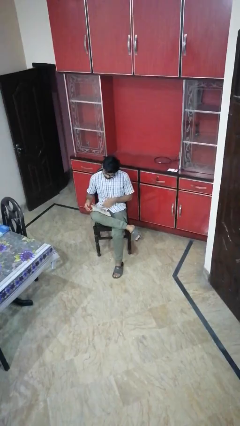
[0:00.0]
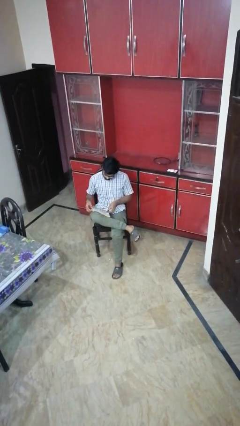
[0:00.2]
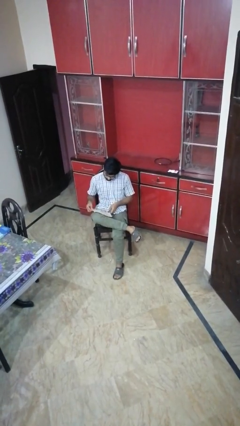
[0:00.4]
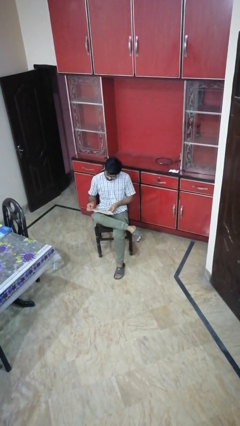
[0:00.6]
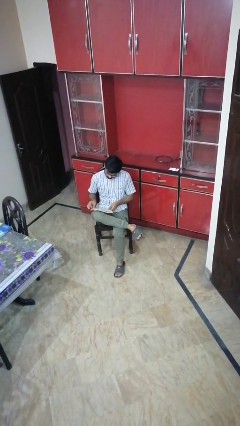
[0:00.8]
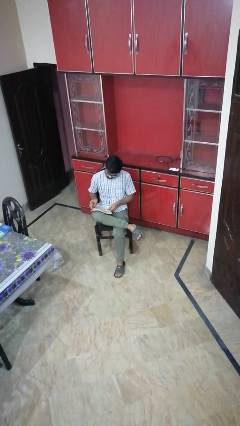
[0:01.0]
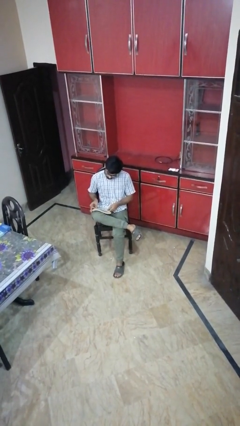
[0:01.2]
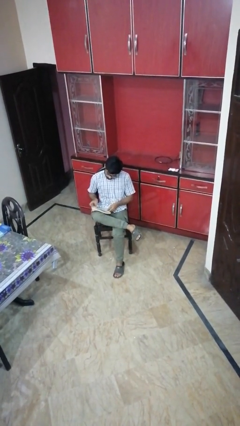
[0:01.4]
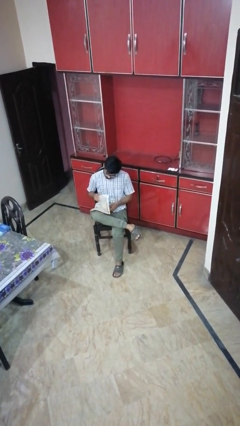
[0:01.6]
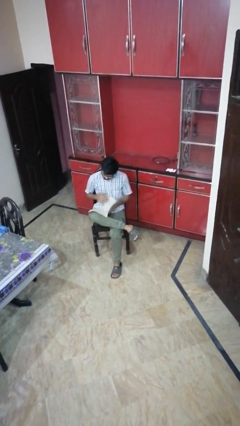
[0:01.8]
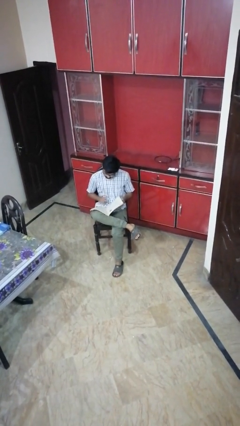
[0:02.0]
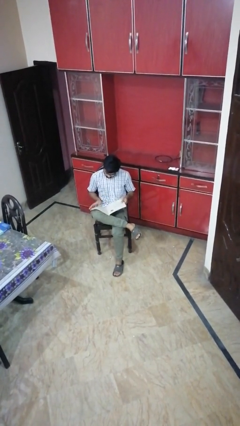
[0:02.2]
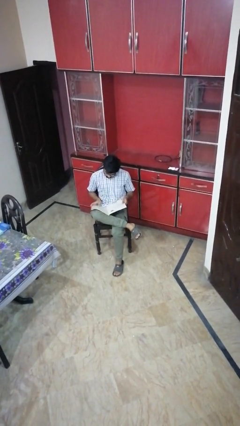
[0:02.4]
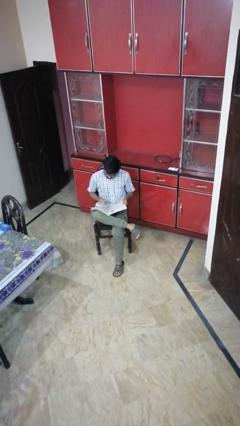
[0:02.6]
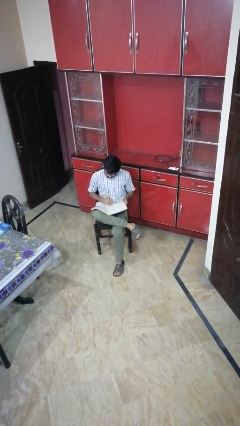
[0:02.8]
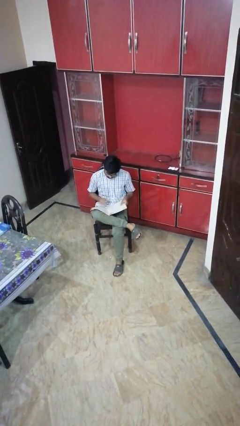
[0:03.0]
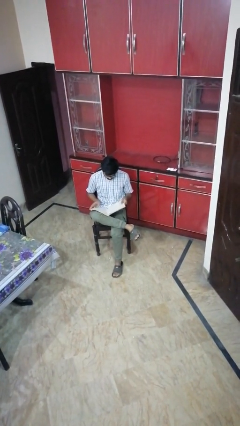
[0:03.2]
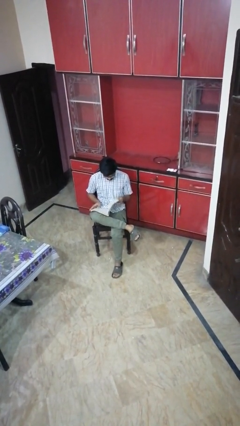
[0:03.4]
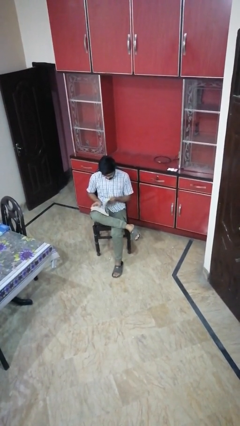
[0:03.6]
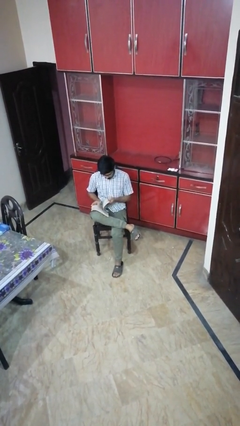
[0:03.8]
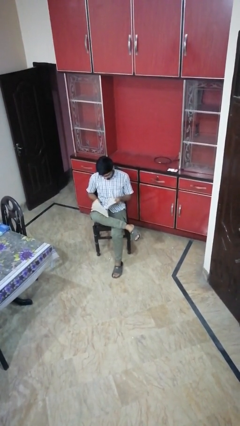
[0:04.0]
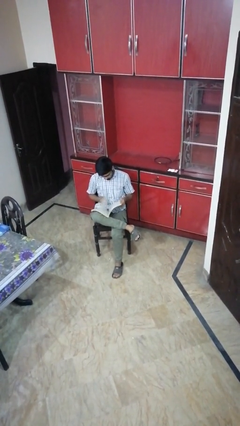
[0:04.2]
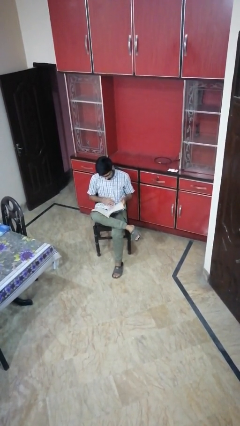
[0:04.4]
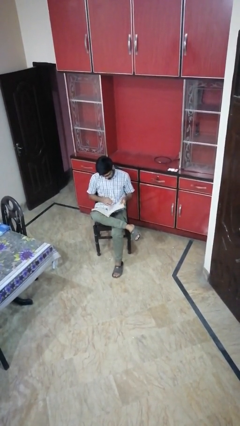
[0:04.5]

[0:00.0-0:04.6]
person exercises with situp

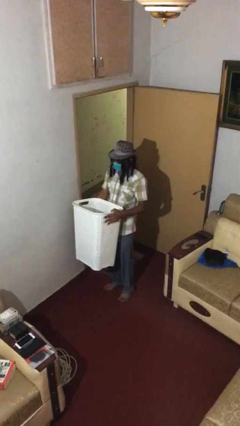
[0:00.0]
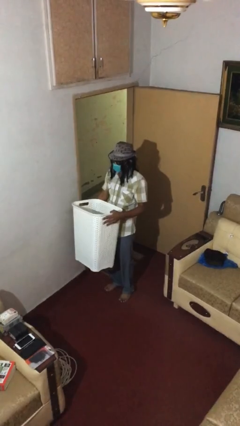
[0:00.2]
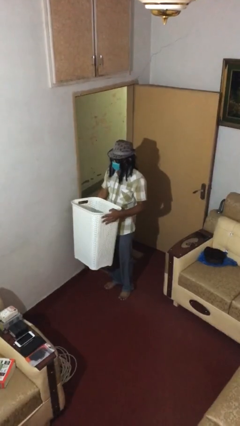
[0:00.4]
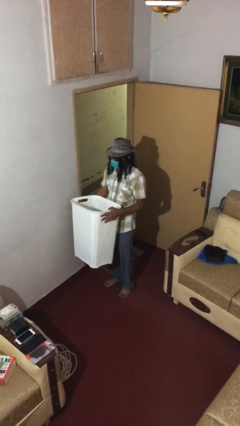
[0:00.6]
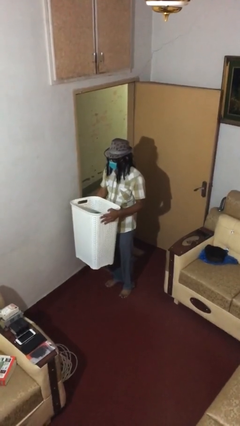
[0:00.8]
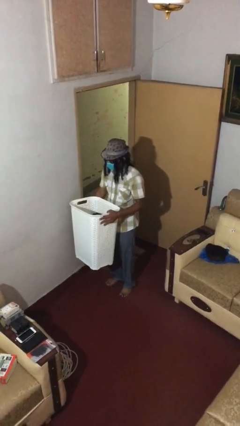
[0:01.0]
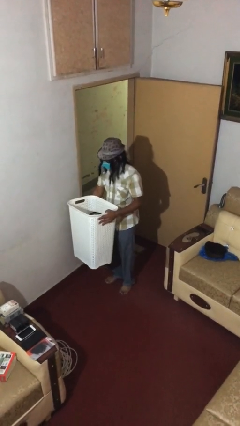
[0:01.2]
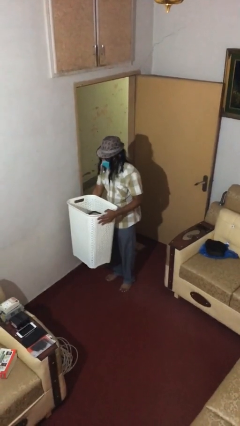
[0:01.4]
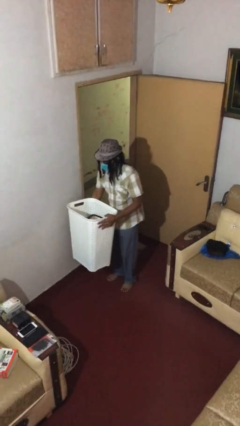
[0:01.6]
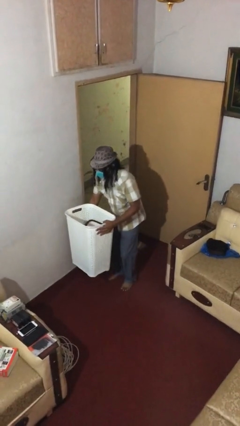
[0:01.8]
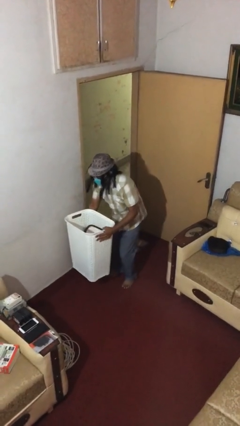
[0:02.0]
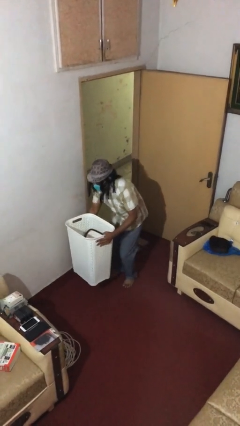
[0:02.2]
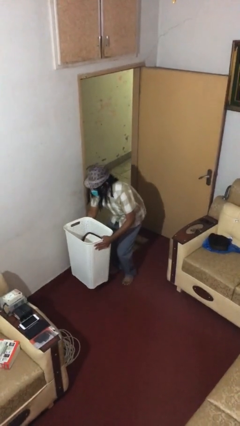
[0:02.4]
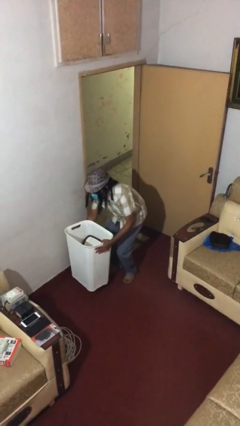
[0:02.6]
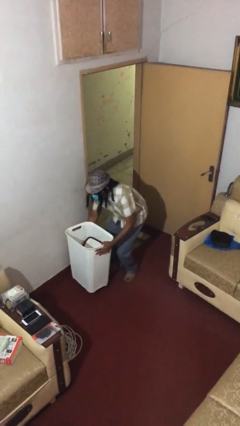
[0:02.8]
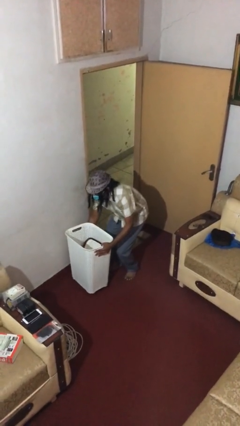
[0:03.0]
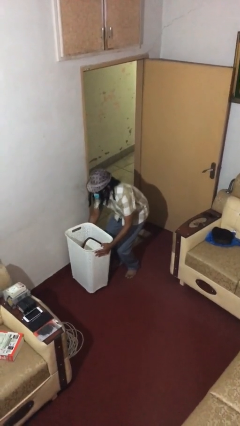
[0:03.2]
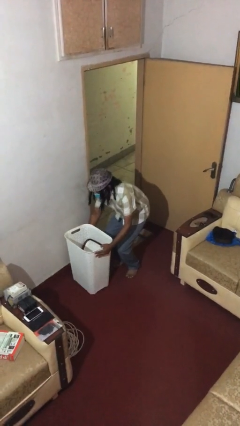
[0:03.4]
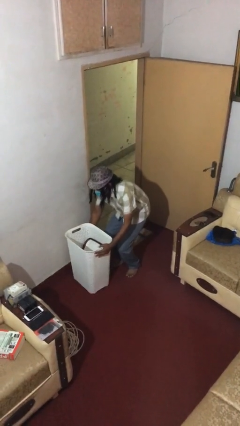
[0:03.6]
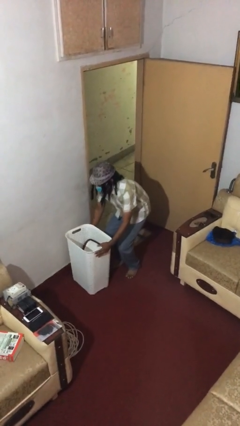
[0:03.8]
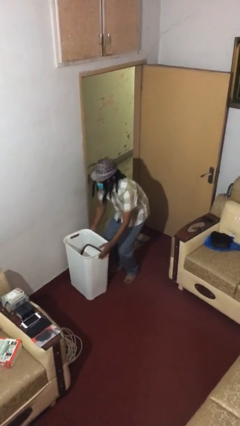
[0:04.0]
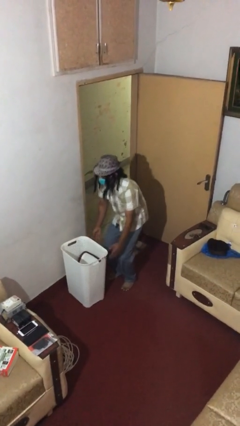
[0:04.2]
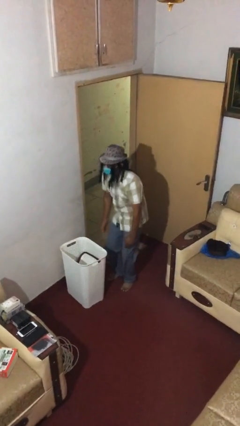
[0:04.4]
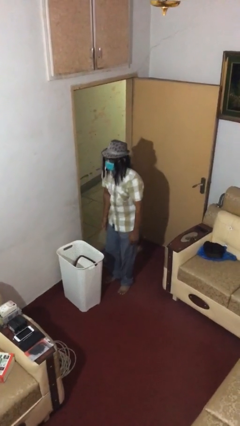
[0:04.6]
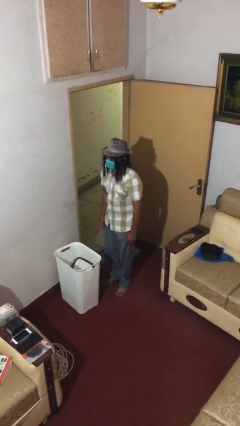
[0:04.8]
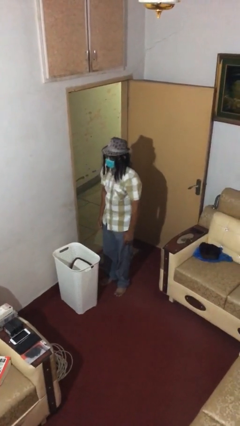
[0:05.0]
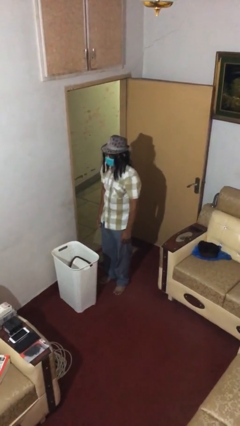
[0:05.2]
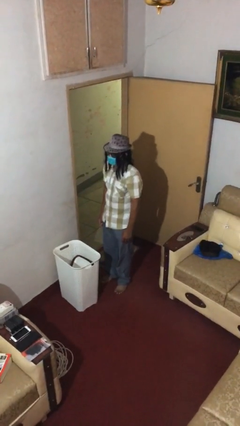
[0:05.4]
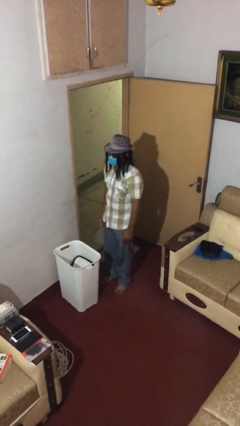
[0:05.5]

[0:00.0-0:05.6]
person puts down object on floor

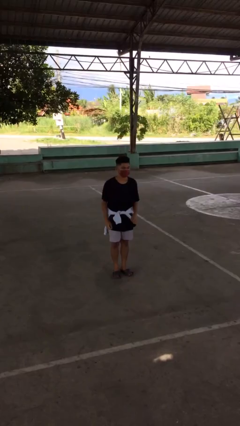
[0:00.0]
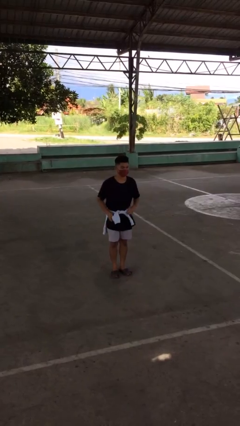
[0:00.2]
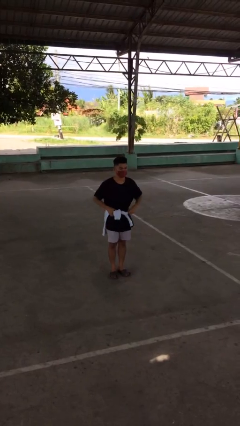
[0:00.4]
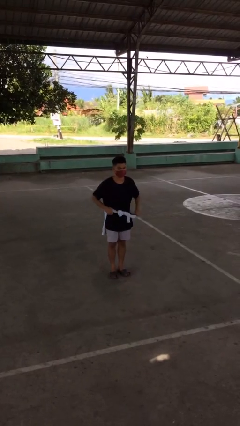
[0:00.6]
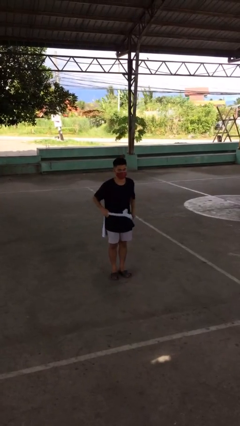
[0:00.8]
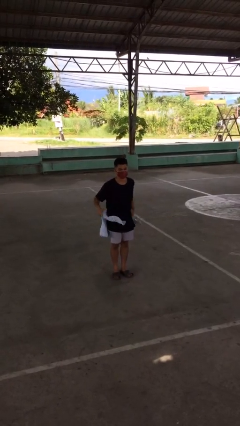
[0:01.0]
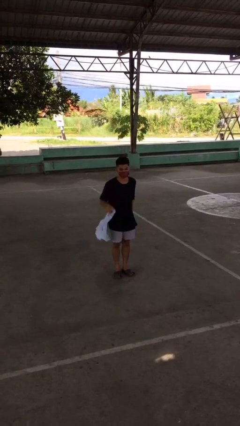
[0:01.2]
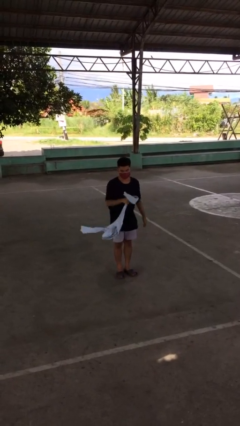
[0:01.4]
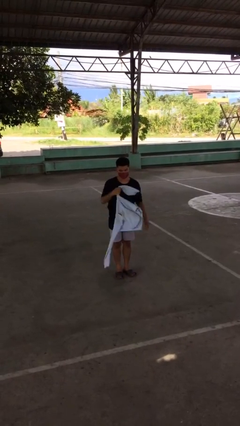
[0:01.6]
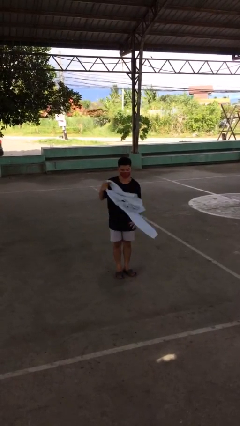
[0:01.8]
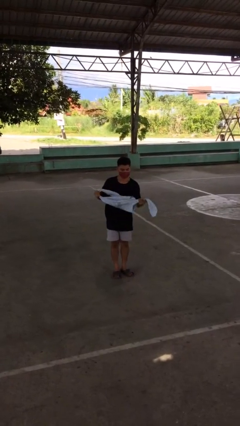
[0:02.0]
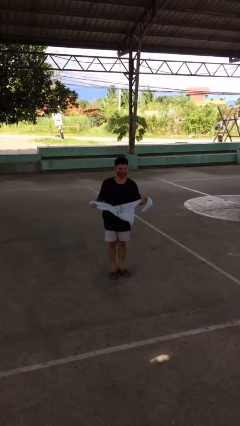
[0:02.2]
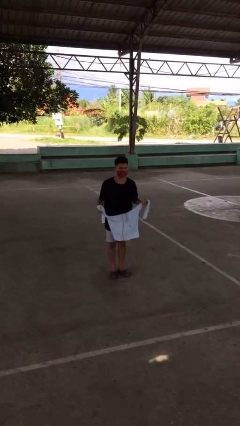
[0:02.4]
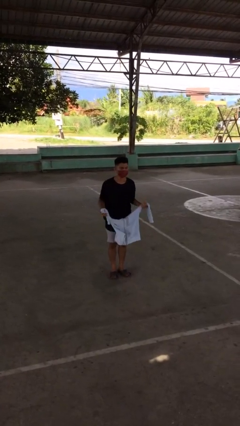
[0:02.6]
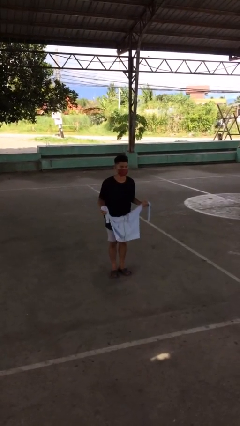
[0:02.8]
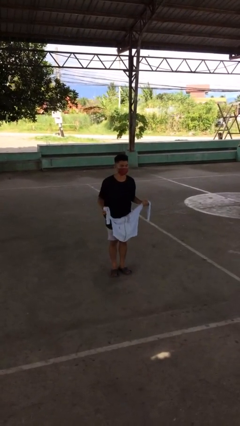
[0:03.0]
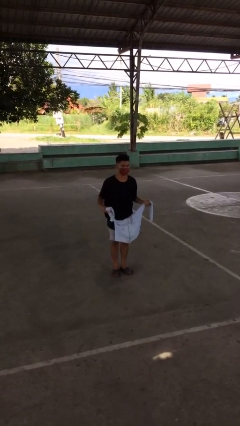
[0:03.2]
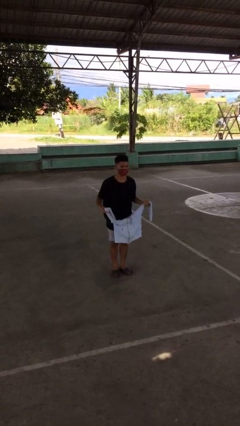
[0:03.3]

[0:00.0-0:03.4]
person unties jacket around waist

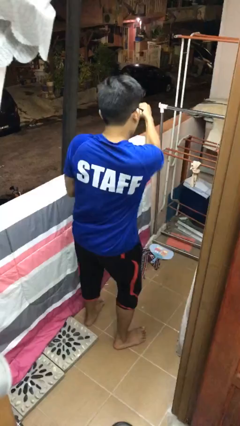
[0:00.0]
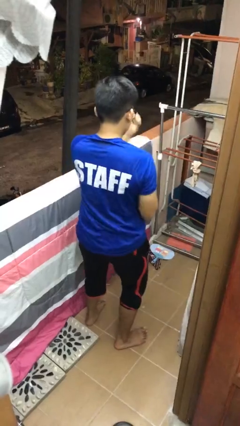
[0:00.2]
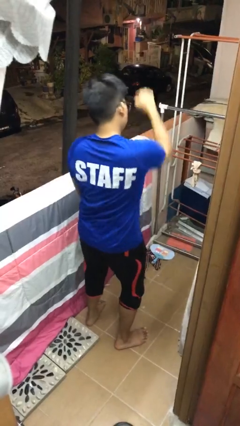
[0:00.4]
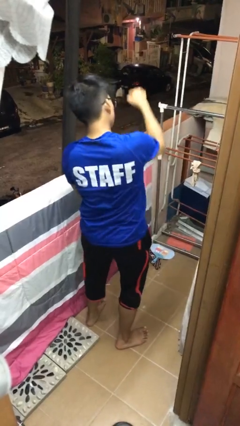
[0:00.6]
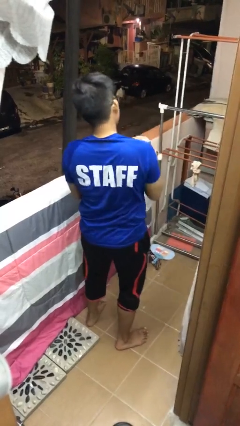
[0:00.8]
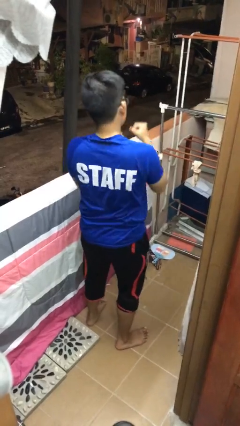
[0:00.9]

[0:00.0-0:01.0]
person punches

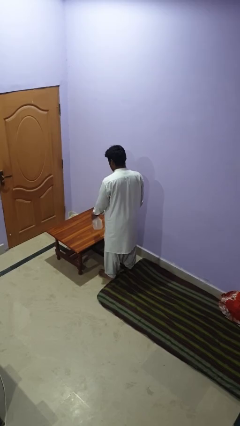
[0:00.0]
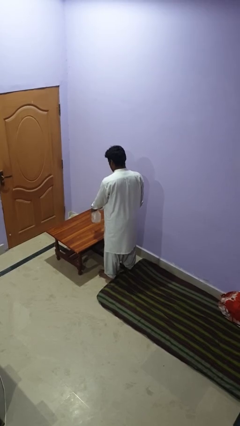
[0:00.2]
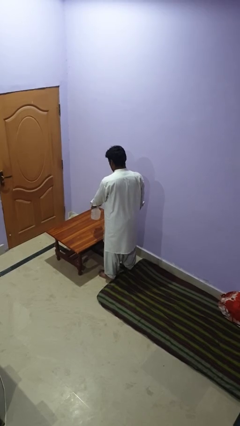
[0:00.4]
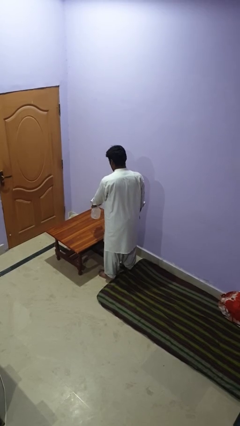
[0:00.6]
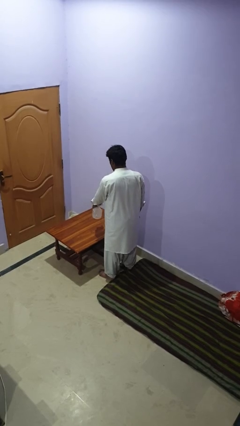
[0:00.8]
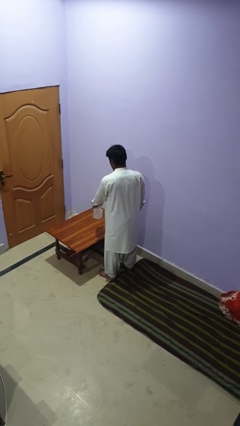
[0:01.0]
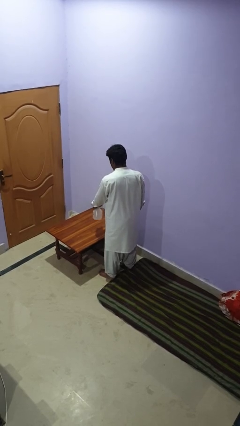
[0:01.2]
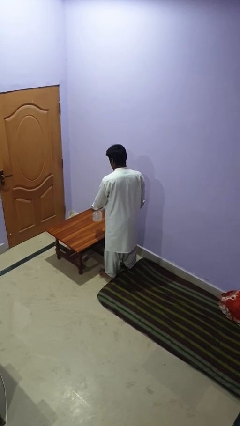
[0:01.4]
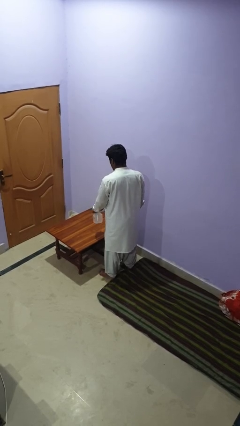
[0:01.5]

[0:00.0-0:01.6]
person sprays from bottle

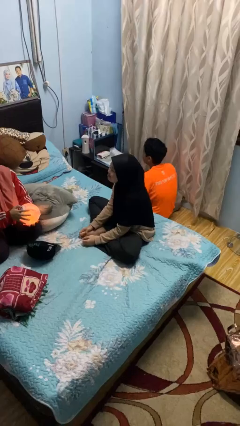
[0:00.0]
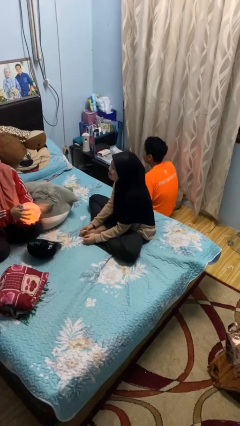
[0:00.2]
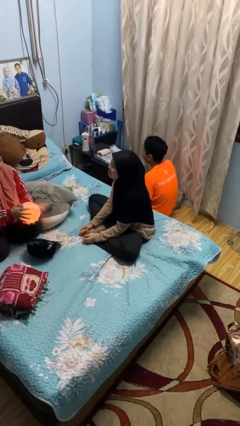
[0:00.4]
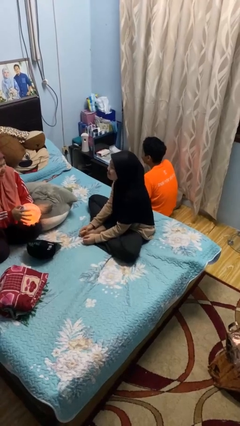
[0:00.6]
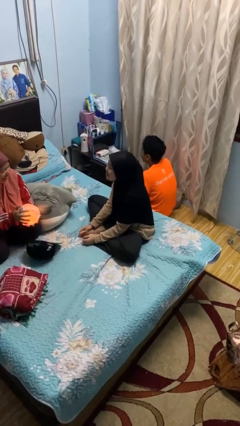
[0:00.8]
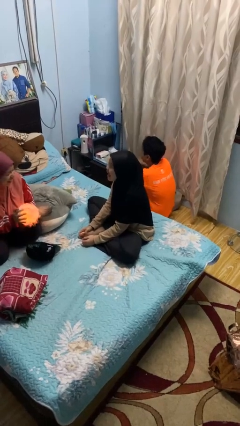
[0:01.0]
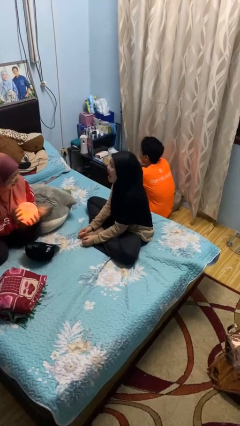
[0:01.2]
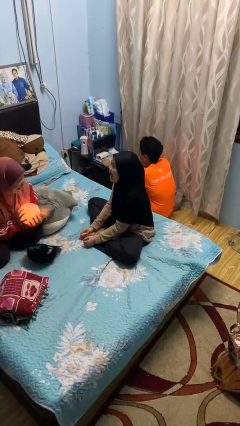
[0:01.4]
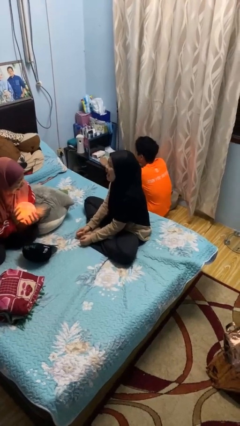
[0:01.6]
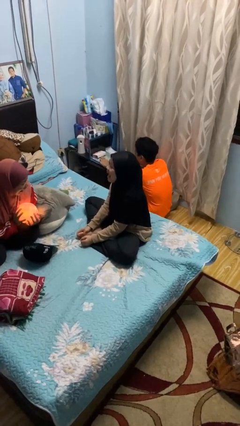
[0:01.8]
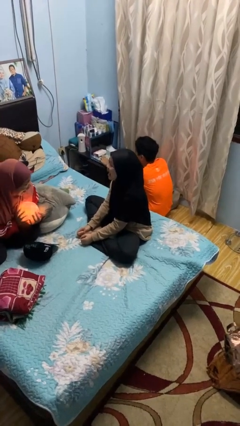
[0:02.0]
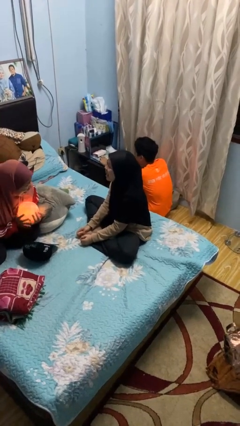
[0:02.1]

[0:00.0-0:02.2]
person laughs with person
